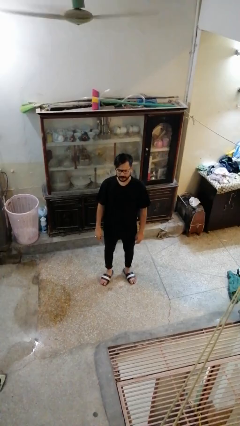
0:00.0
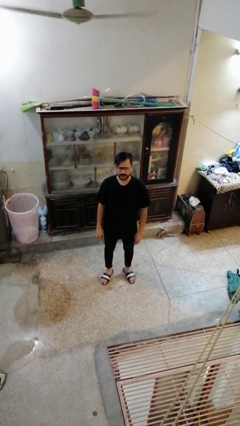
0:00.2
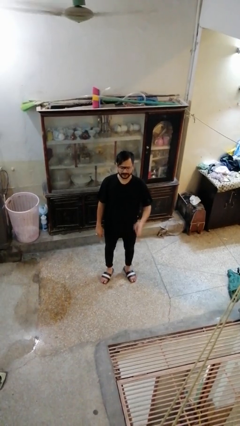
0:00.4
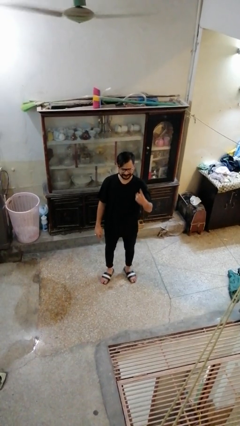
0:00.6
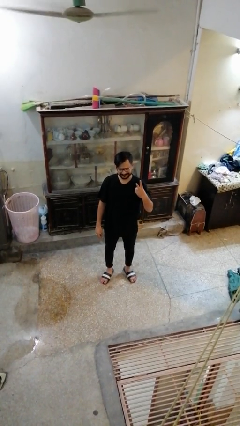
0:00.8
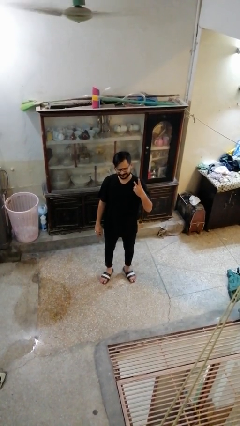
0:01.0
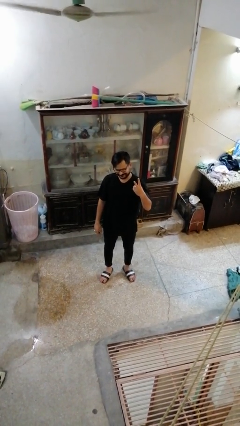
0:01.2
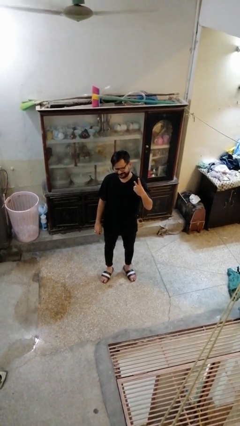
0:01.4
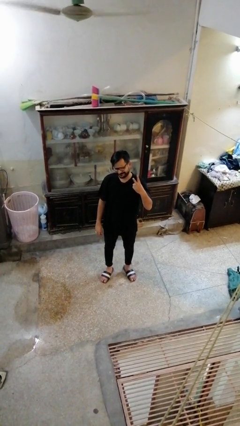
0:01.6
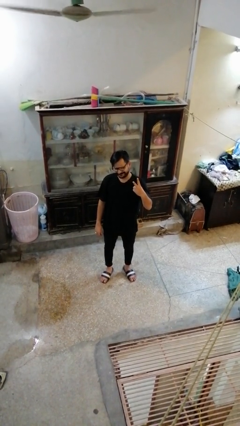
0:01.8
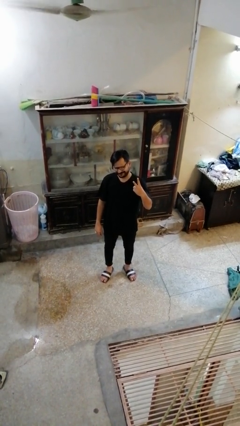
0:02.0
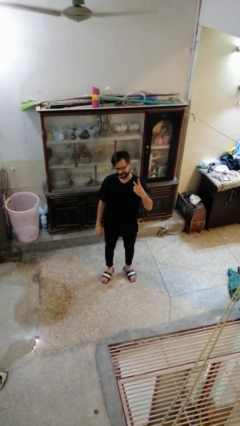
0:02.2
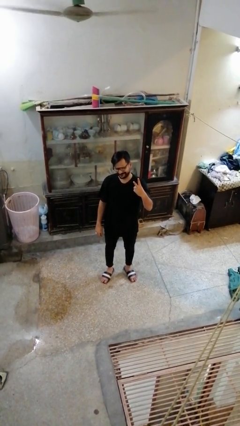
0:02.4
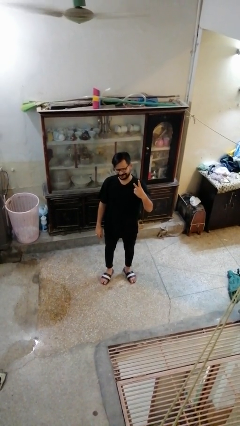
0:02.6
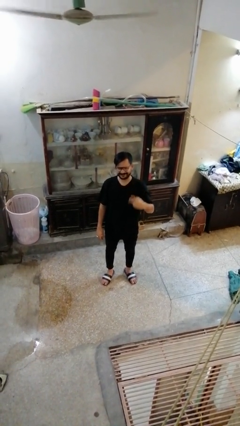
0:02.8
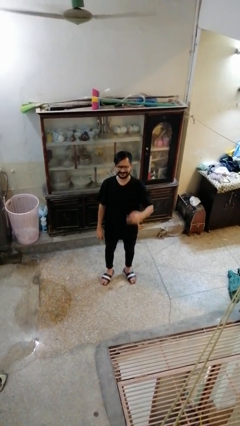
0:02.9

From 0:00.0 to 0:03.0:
person gestures peace

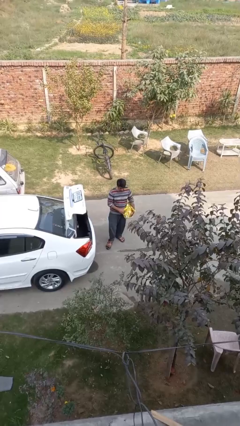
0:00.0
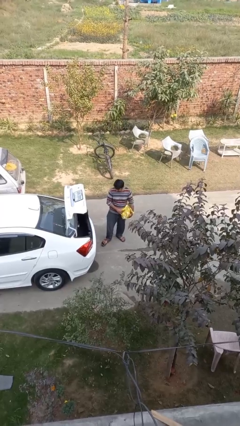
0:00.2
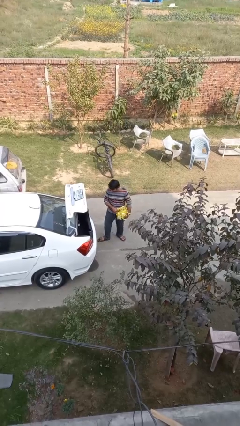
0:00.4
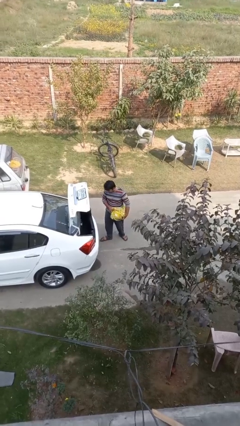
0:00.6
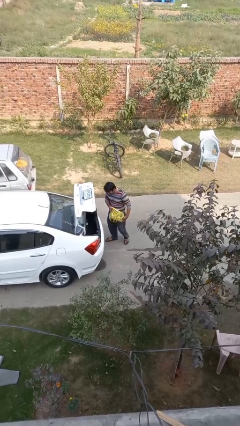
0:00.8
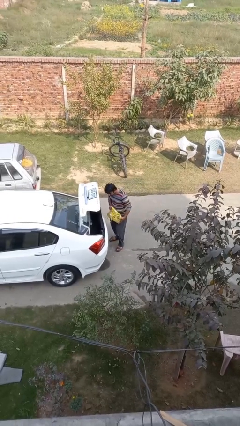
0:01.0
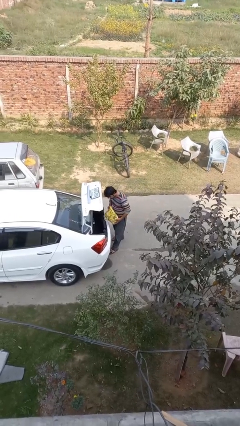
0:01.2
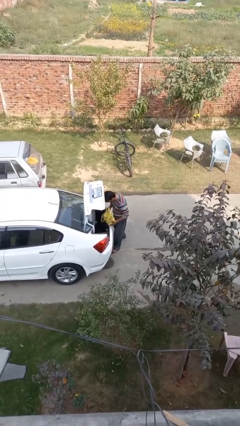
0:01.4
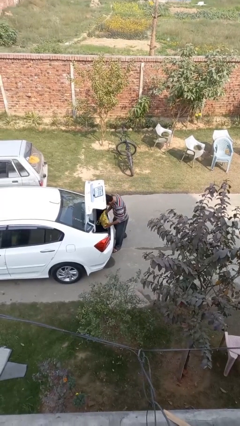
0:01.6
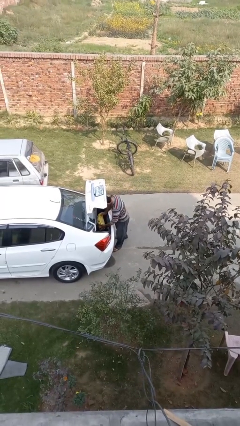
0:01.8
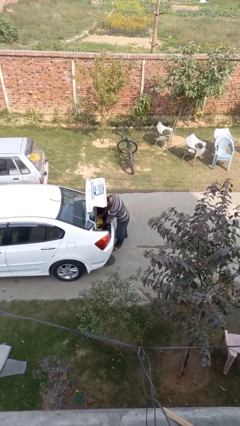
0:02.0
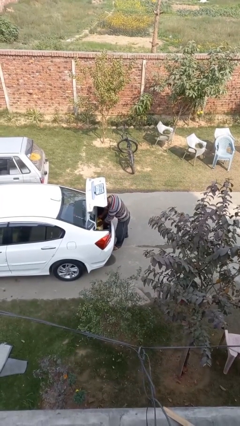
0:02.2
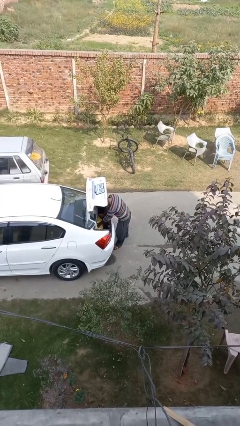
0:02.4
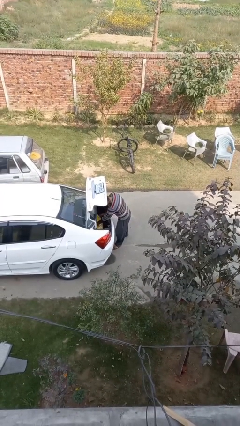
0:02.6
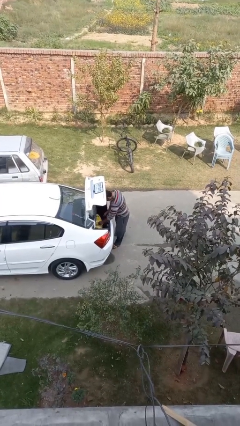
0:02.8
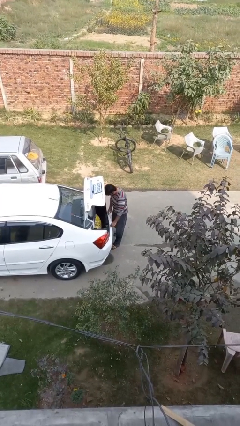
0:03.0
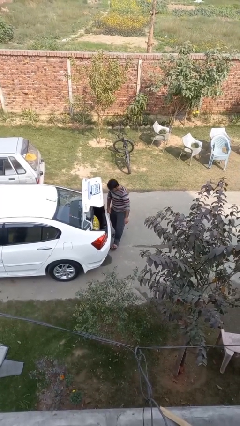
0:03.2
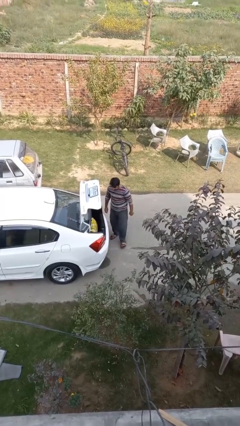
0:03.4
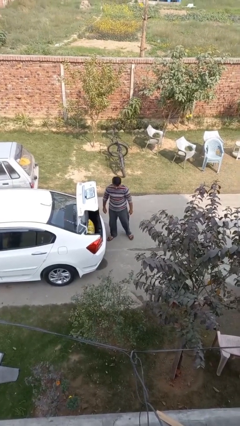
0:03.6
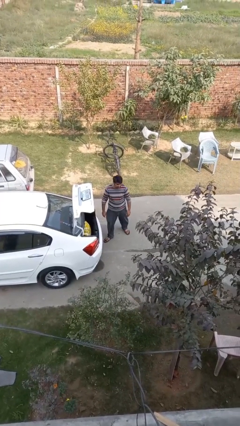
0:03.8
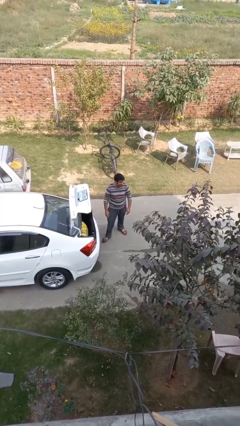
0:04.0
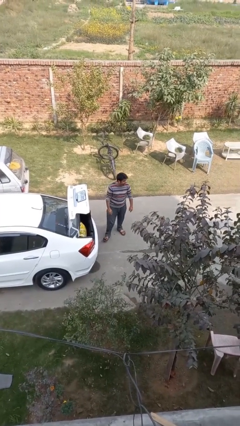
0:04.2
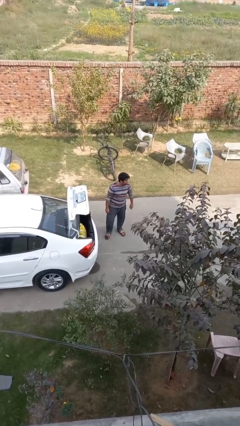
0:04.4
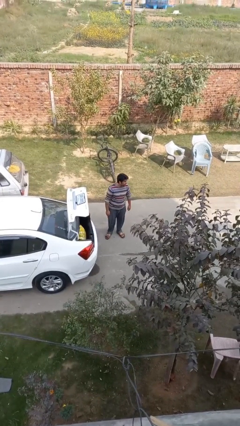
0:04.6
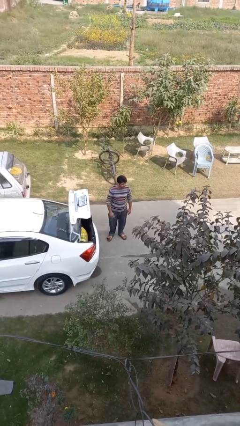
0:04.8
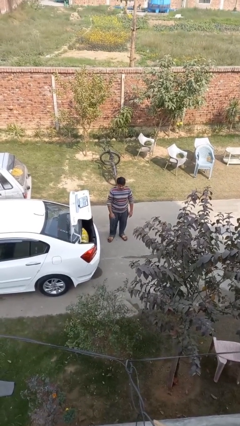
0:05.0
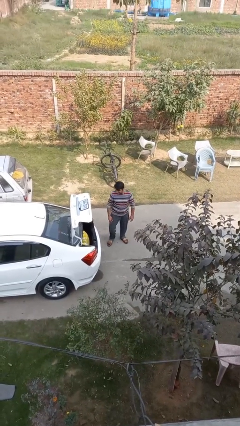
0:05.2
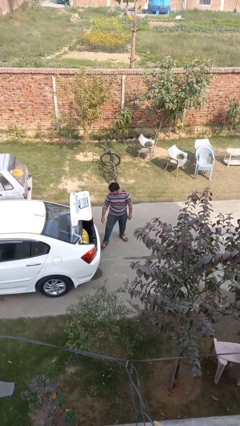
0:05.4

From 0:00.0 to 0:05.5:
person loads car

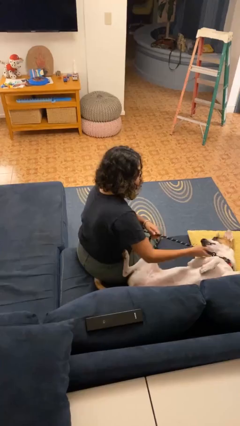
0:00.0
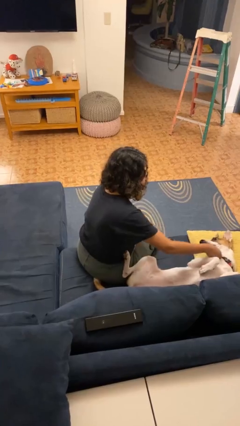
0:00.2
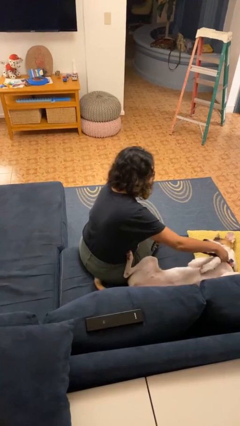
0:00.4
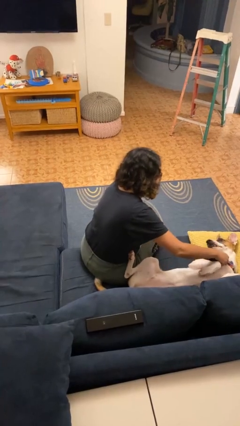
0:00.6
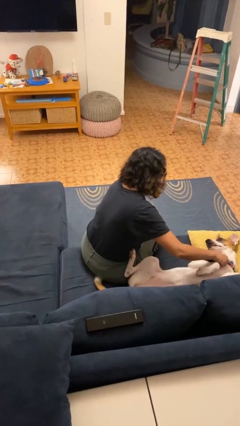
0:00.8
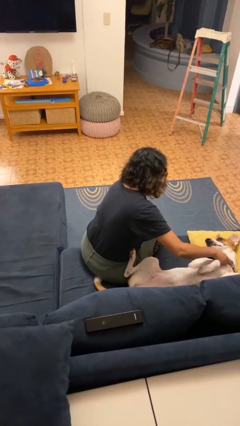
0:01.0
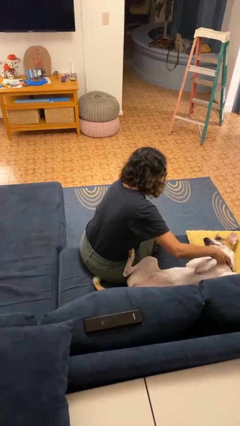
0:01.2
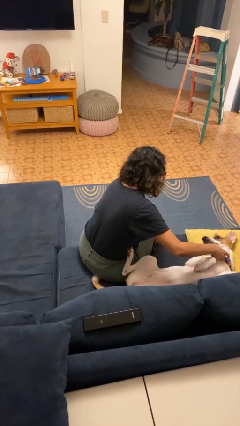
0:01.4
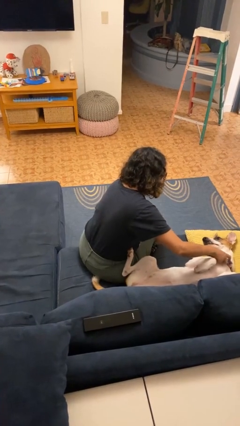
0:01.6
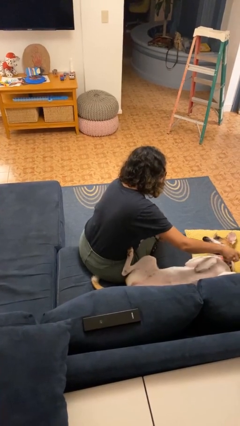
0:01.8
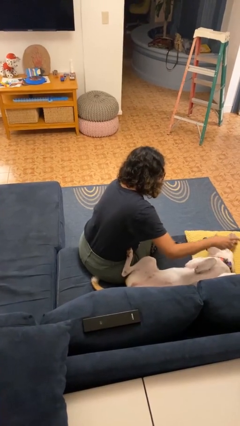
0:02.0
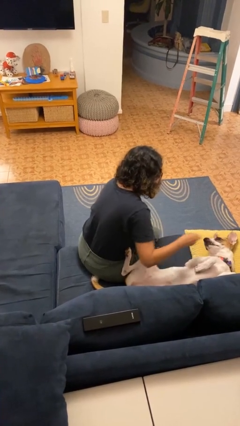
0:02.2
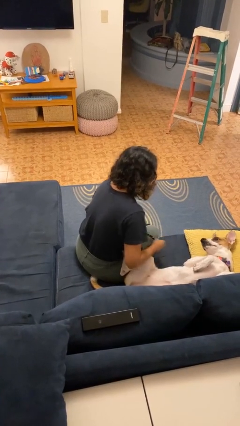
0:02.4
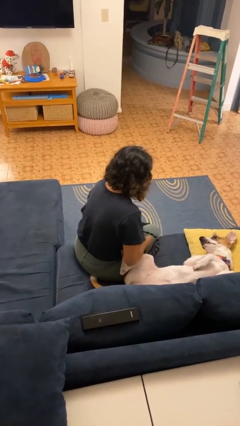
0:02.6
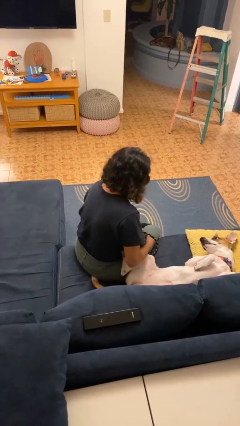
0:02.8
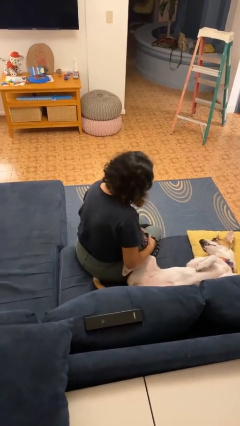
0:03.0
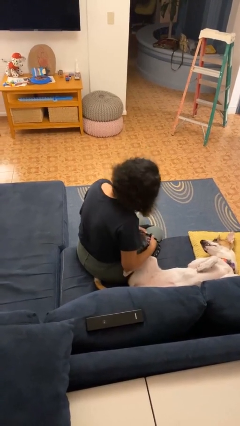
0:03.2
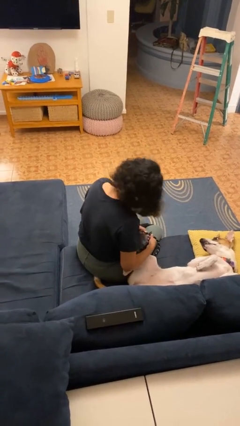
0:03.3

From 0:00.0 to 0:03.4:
person unattaches leash from dog

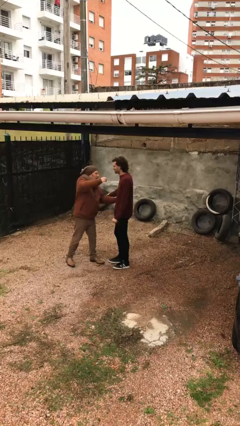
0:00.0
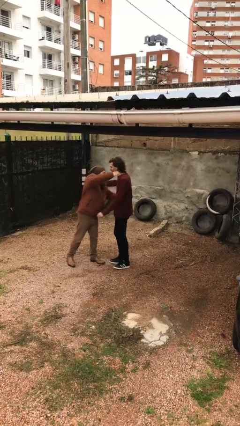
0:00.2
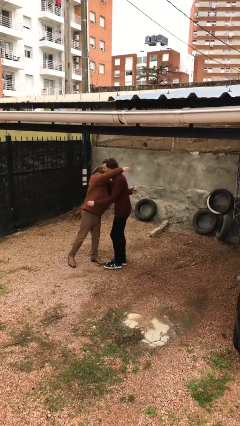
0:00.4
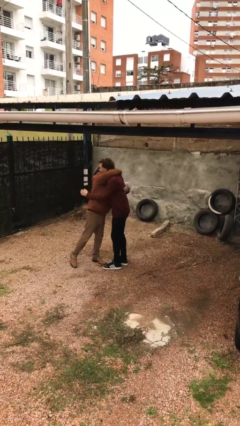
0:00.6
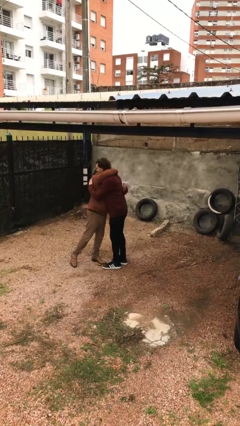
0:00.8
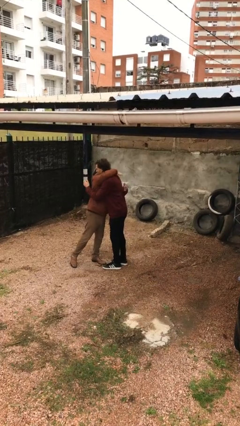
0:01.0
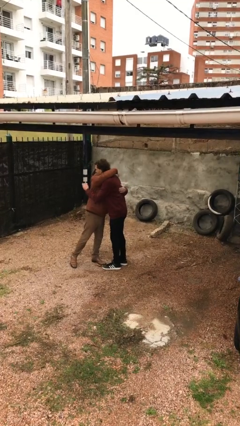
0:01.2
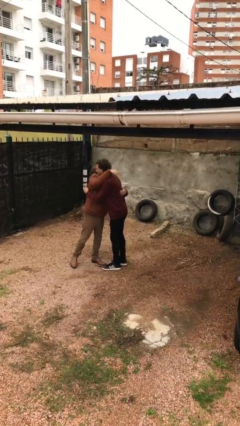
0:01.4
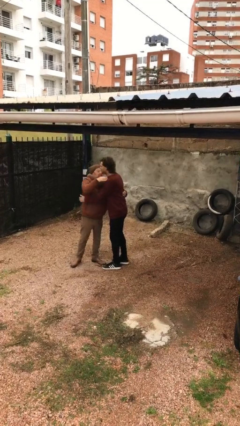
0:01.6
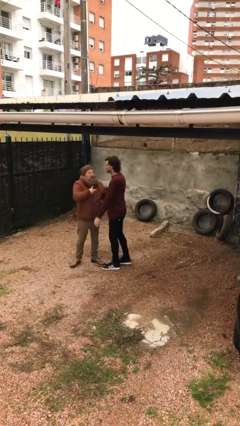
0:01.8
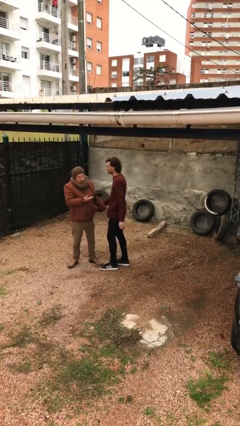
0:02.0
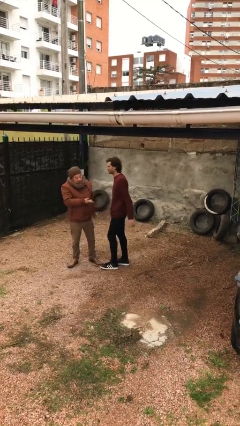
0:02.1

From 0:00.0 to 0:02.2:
person embraces person

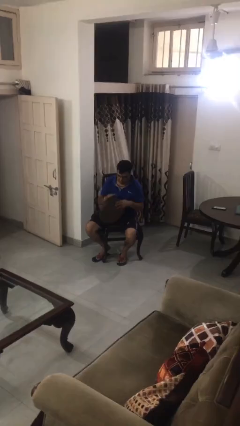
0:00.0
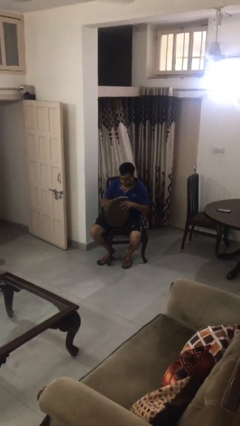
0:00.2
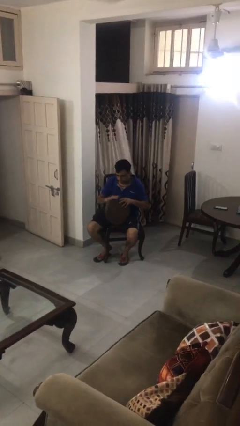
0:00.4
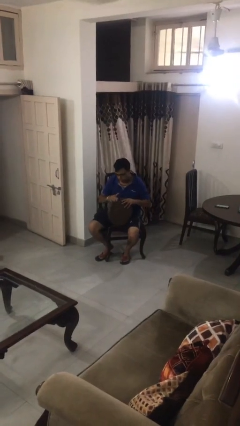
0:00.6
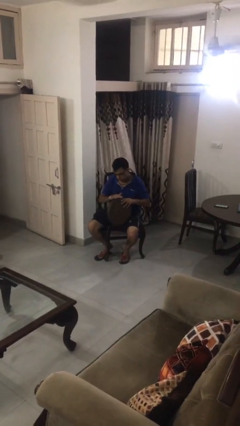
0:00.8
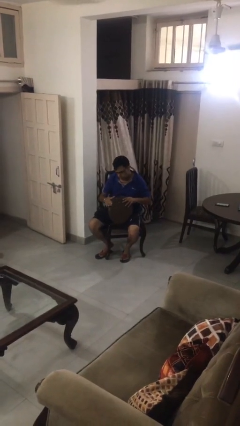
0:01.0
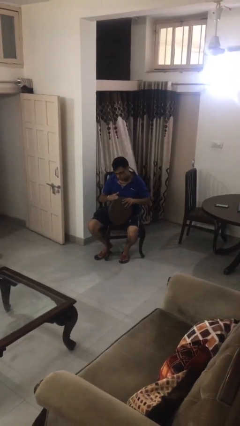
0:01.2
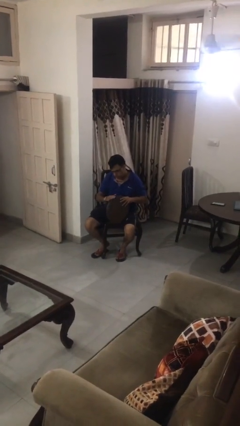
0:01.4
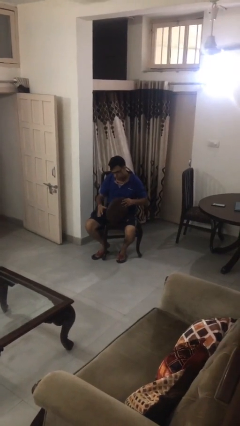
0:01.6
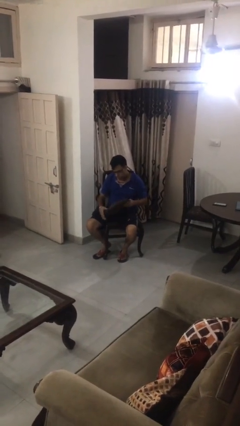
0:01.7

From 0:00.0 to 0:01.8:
person waves hand over object

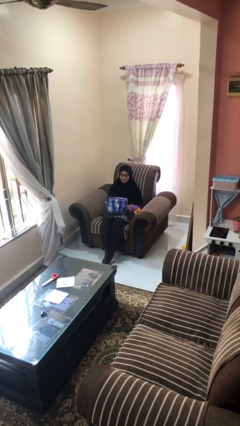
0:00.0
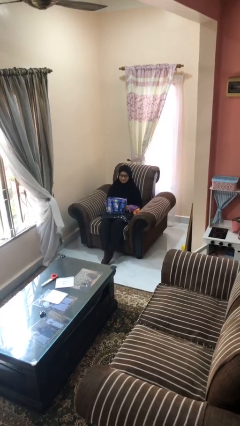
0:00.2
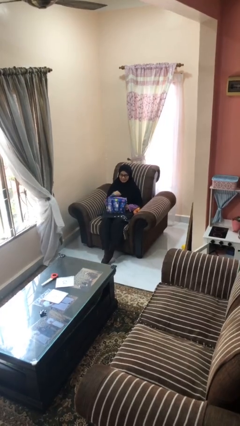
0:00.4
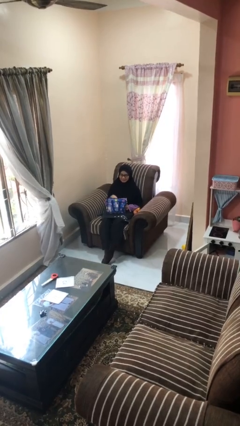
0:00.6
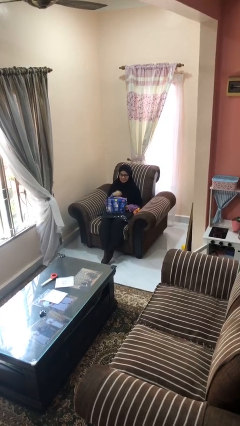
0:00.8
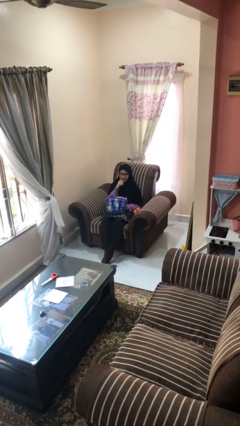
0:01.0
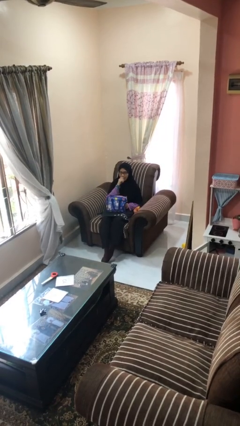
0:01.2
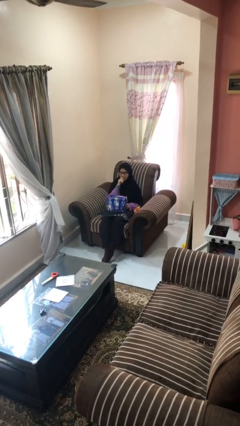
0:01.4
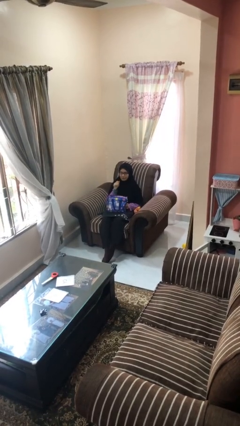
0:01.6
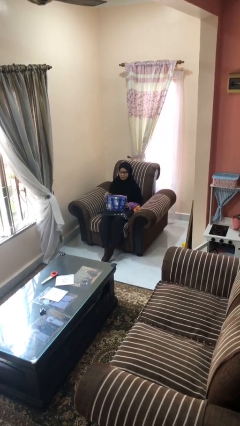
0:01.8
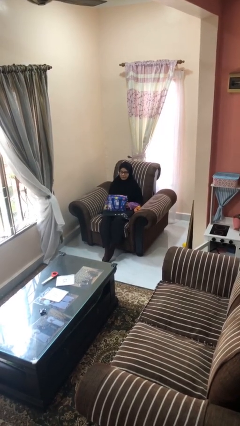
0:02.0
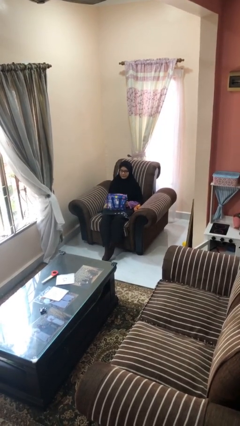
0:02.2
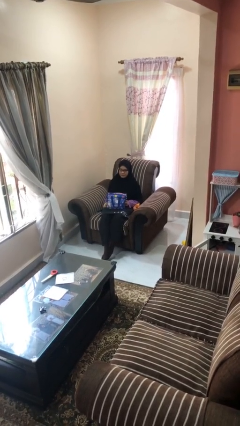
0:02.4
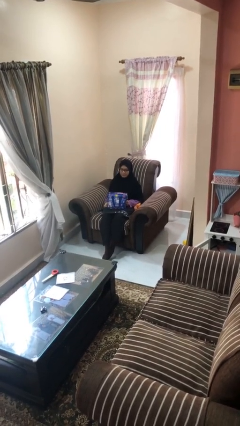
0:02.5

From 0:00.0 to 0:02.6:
person eats snack from bag
